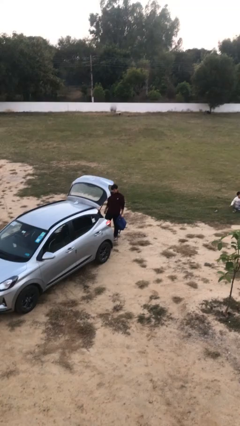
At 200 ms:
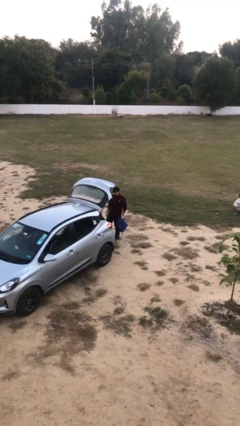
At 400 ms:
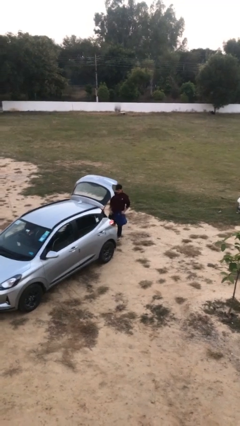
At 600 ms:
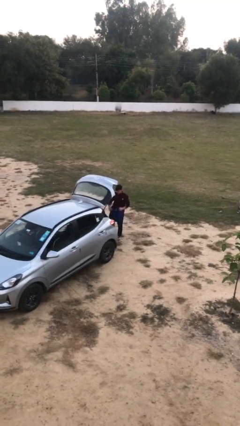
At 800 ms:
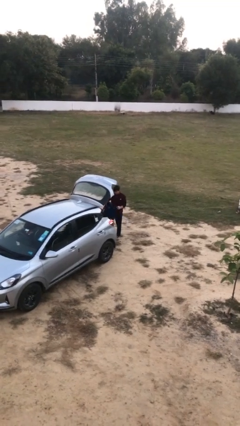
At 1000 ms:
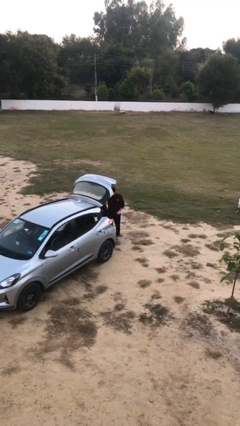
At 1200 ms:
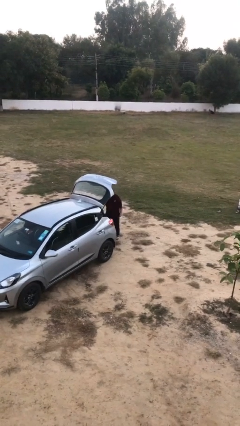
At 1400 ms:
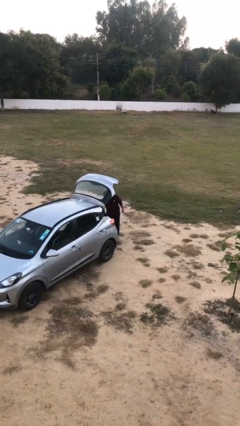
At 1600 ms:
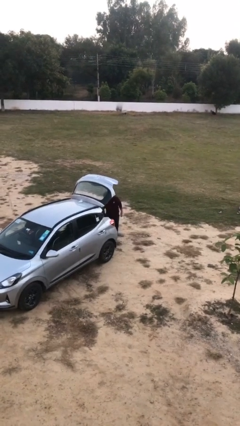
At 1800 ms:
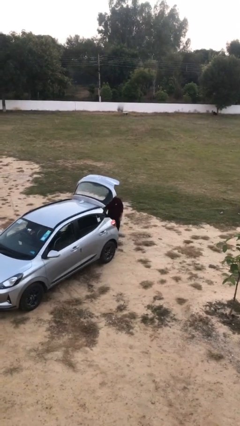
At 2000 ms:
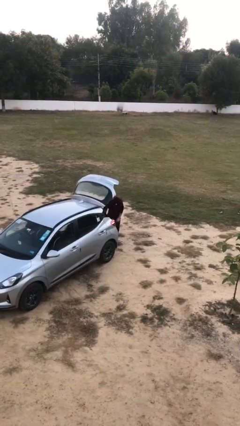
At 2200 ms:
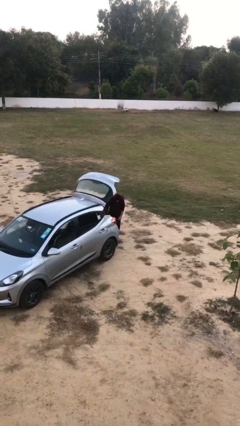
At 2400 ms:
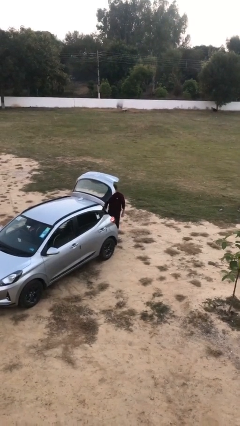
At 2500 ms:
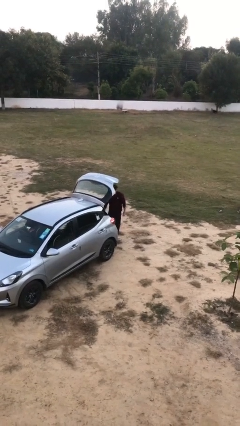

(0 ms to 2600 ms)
person loads car

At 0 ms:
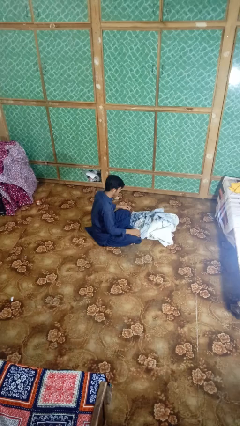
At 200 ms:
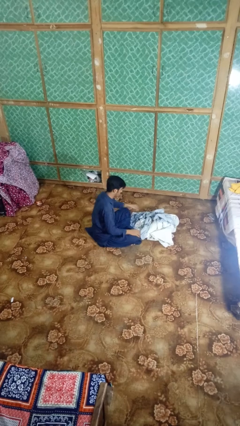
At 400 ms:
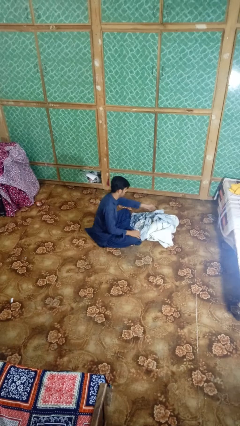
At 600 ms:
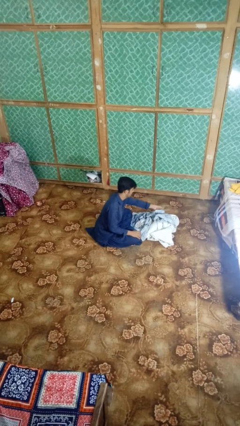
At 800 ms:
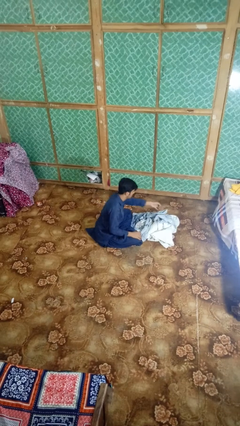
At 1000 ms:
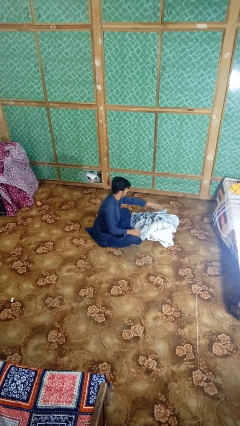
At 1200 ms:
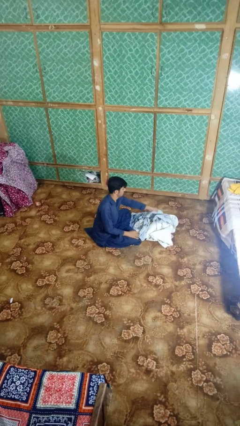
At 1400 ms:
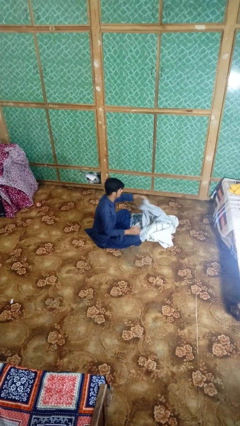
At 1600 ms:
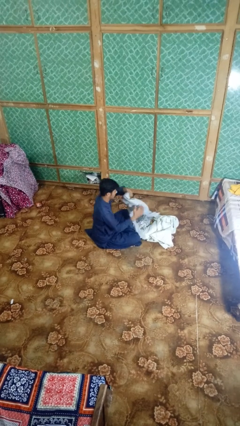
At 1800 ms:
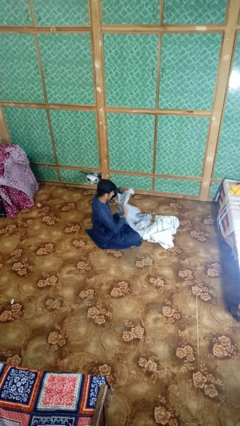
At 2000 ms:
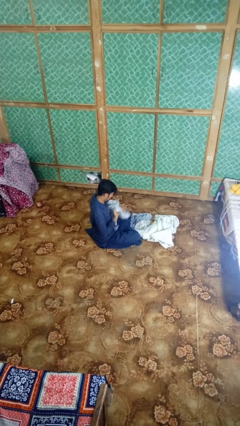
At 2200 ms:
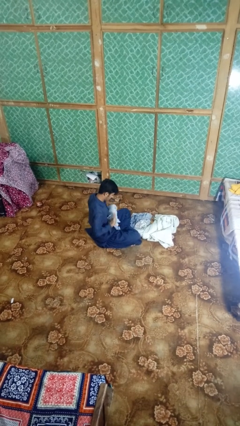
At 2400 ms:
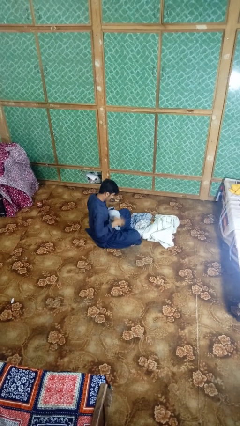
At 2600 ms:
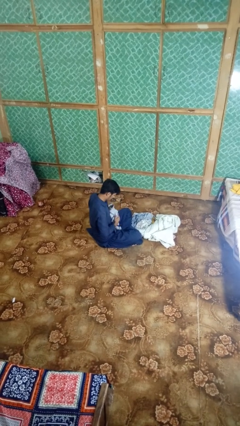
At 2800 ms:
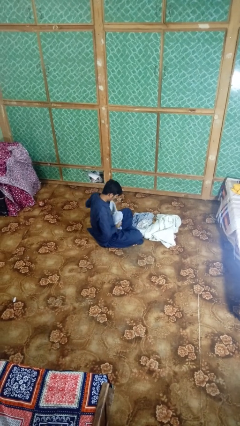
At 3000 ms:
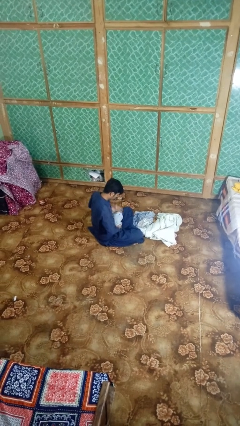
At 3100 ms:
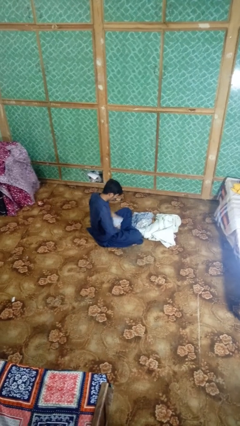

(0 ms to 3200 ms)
person folds shirt

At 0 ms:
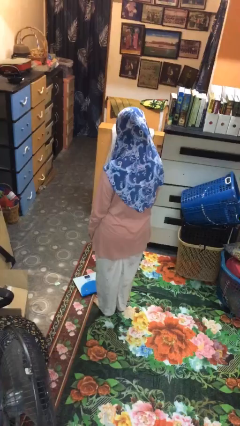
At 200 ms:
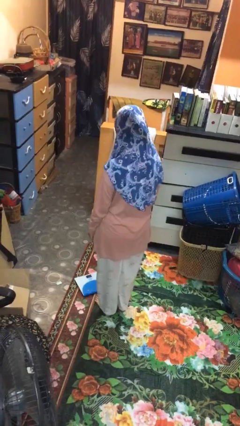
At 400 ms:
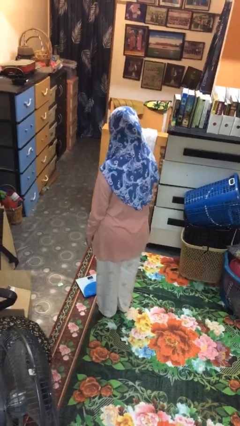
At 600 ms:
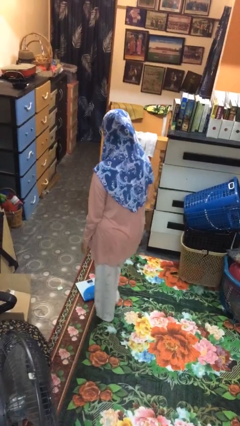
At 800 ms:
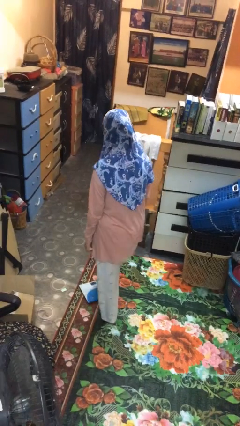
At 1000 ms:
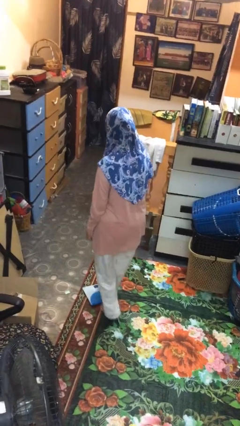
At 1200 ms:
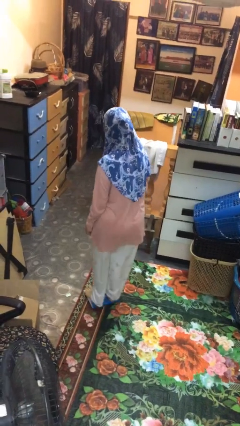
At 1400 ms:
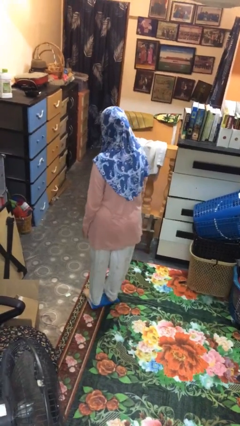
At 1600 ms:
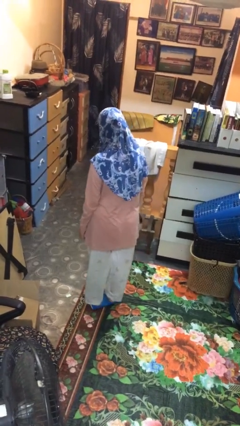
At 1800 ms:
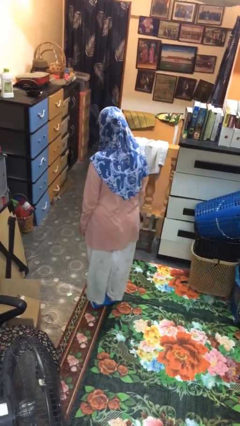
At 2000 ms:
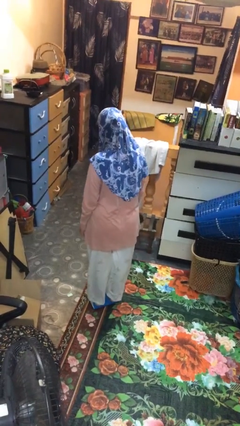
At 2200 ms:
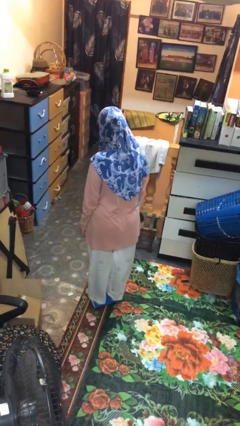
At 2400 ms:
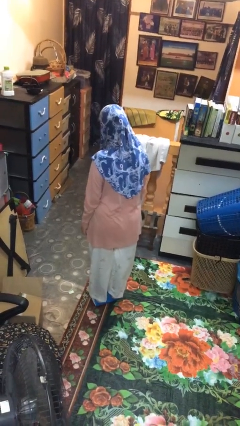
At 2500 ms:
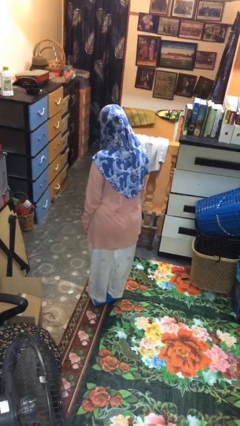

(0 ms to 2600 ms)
person uses bodyweight scale

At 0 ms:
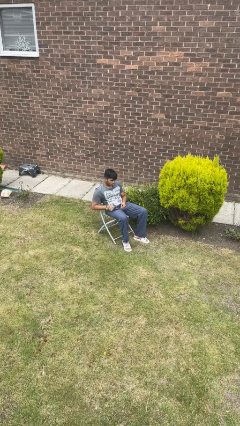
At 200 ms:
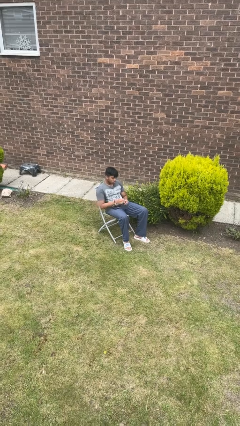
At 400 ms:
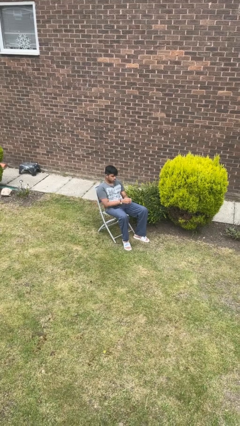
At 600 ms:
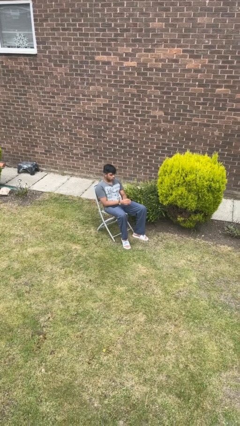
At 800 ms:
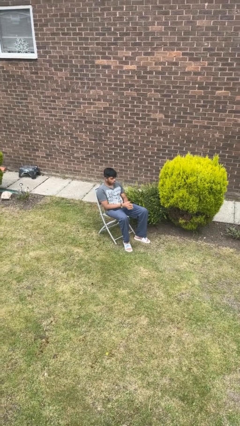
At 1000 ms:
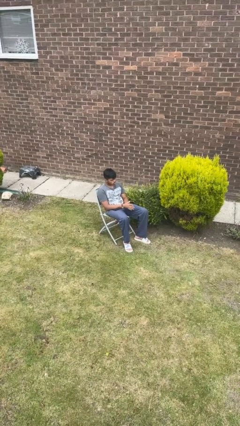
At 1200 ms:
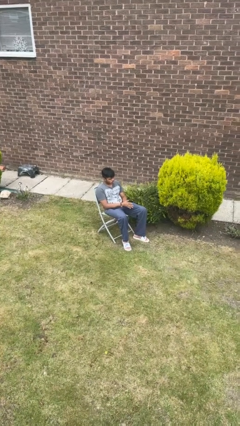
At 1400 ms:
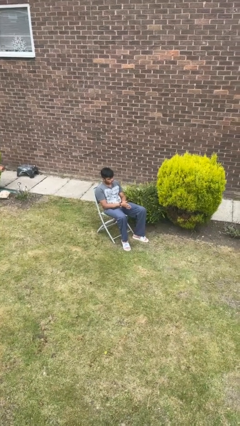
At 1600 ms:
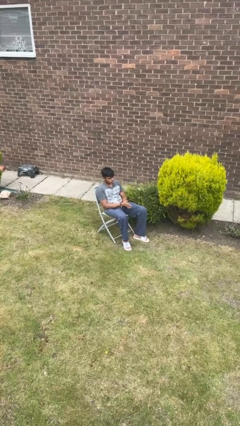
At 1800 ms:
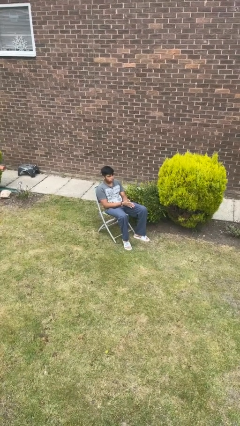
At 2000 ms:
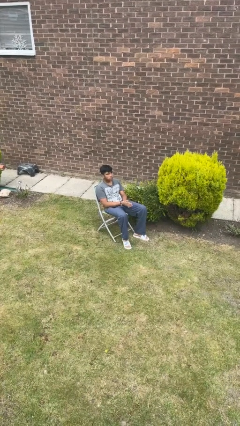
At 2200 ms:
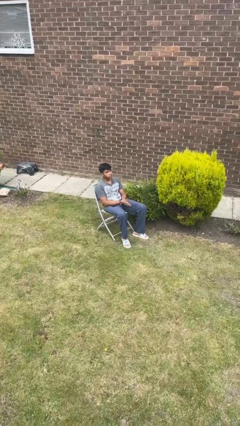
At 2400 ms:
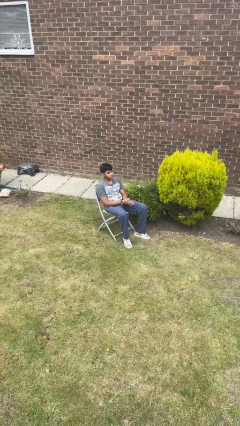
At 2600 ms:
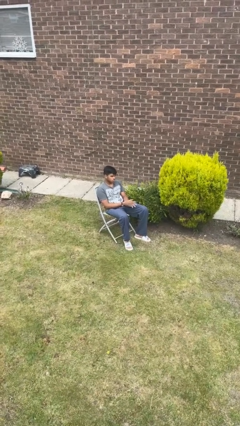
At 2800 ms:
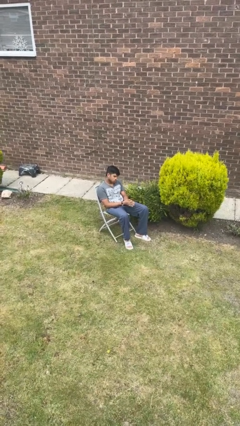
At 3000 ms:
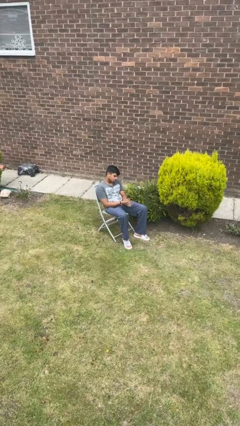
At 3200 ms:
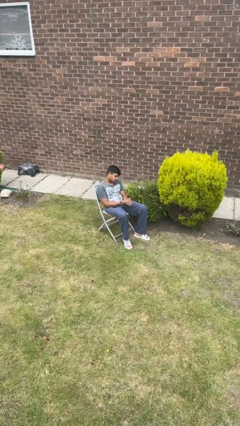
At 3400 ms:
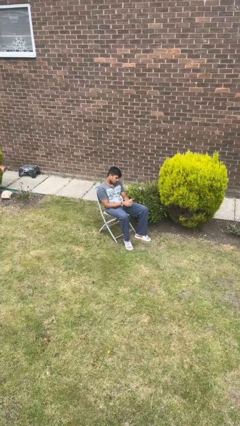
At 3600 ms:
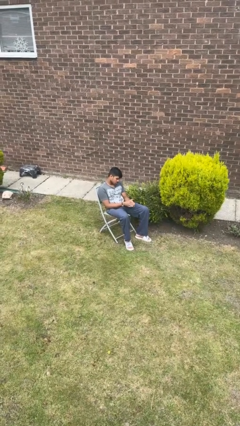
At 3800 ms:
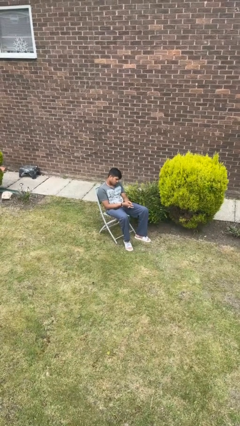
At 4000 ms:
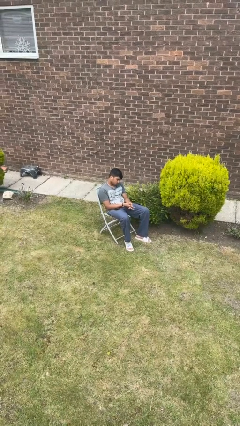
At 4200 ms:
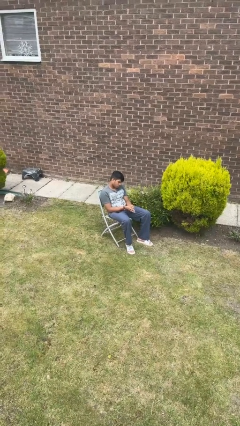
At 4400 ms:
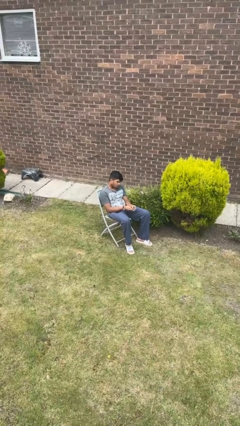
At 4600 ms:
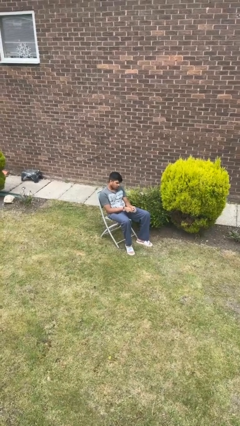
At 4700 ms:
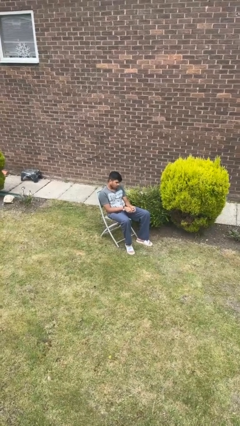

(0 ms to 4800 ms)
person looks at hands in lap

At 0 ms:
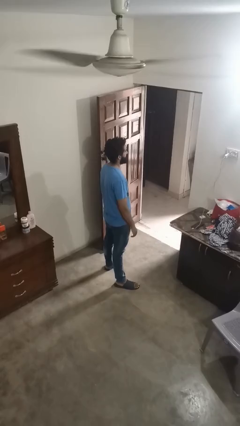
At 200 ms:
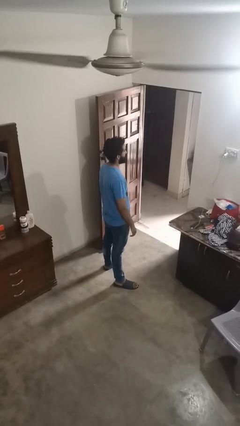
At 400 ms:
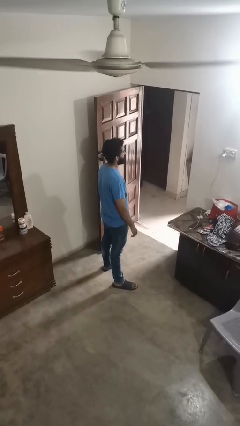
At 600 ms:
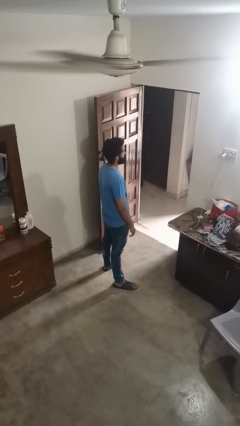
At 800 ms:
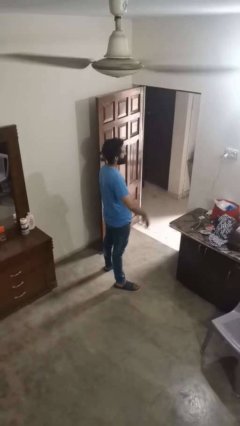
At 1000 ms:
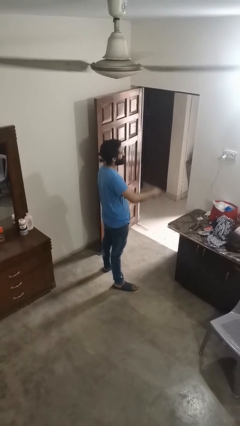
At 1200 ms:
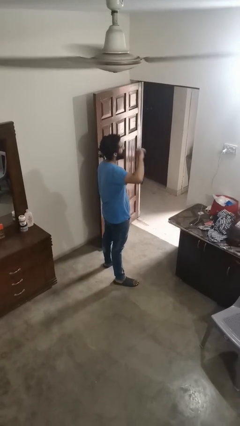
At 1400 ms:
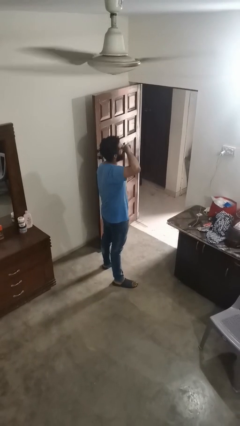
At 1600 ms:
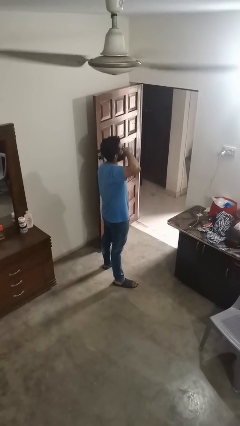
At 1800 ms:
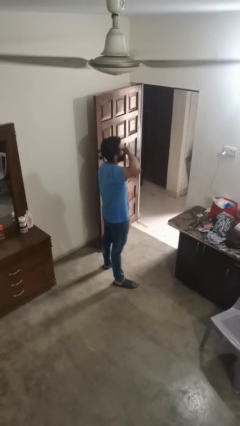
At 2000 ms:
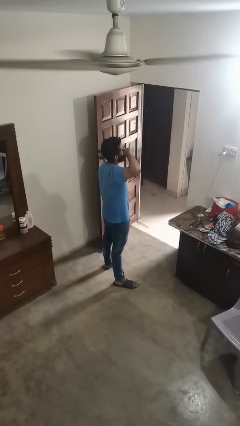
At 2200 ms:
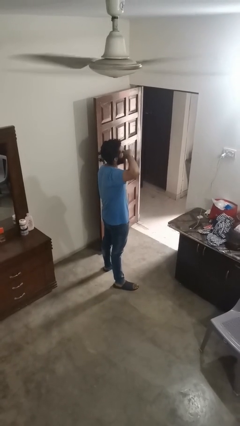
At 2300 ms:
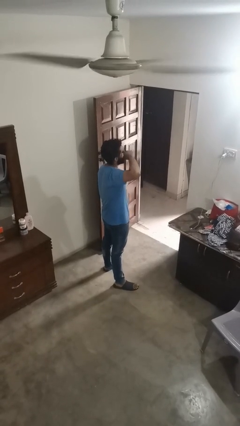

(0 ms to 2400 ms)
person rubs eyes

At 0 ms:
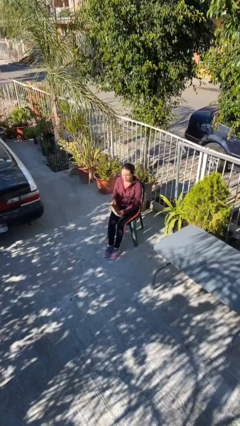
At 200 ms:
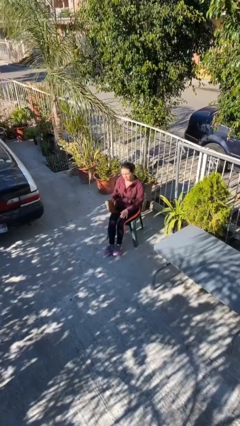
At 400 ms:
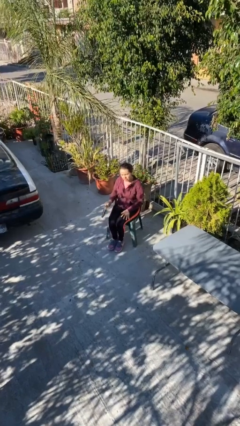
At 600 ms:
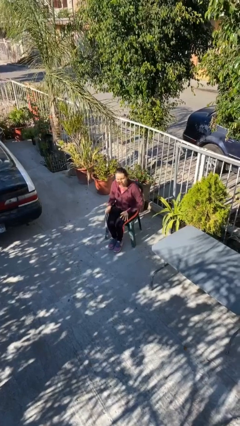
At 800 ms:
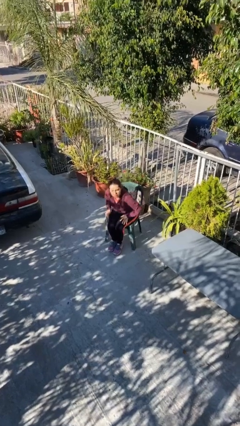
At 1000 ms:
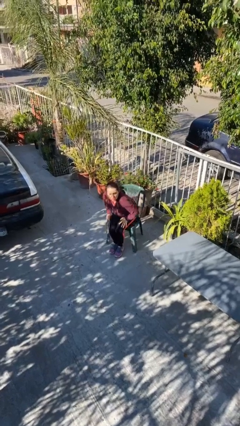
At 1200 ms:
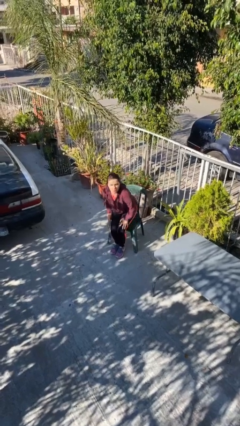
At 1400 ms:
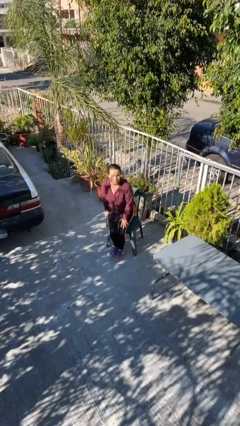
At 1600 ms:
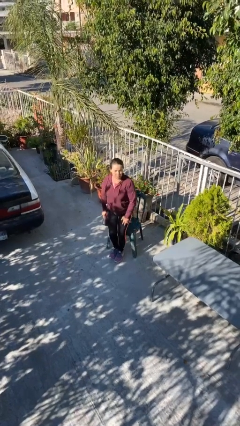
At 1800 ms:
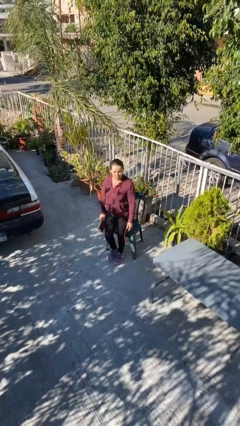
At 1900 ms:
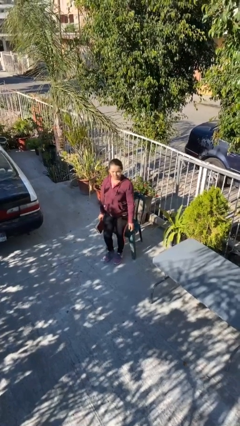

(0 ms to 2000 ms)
person stands up
